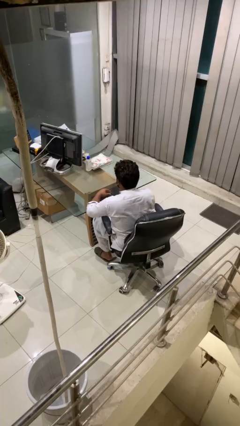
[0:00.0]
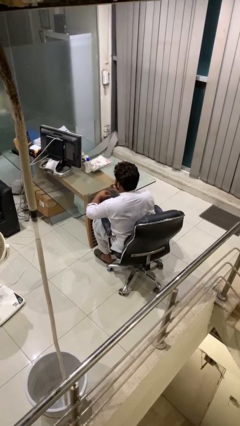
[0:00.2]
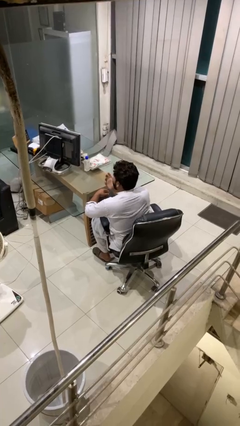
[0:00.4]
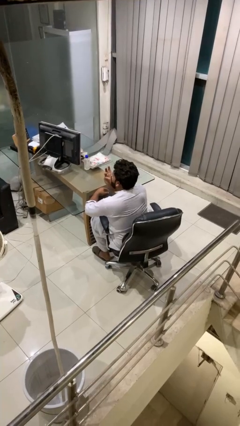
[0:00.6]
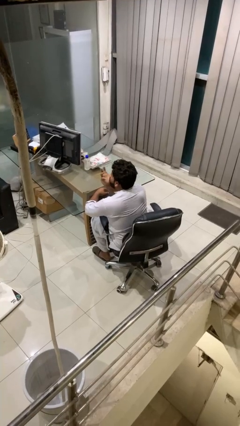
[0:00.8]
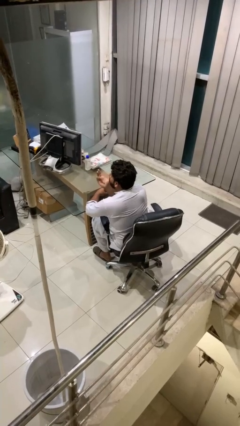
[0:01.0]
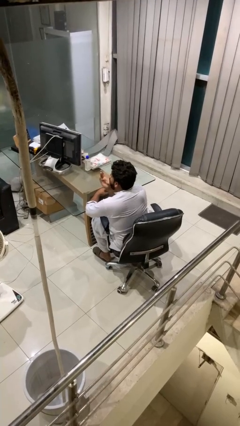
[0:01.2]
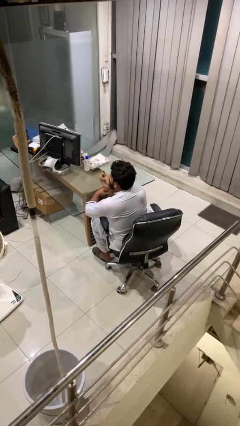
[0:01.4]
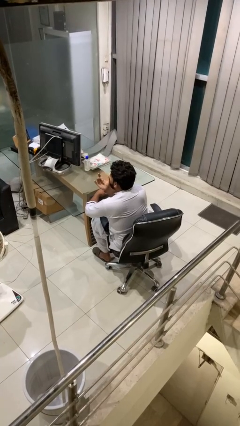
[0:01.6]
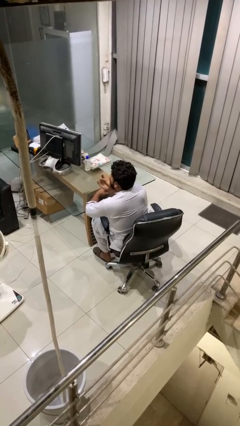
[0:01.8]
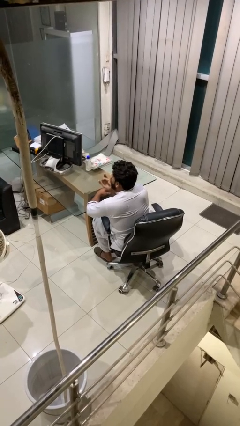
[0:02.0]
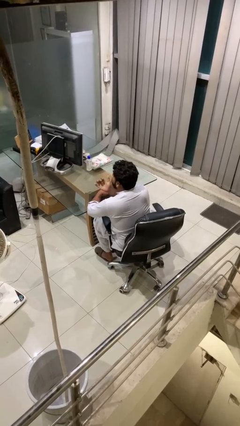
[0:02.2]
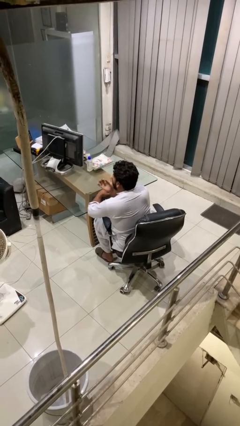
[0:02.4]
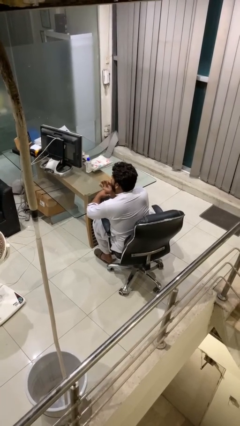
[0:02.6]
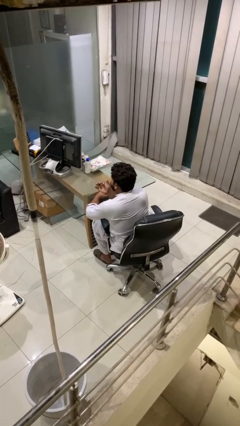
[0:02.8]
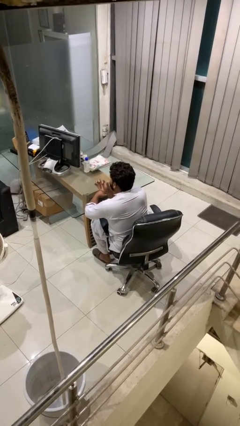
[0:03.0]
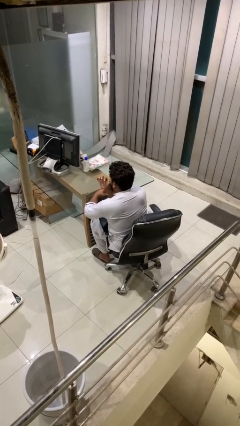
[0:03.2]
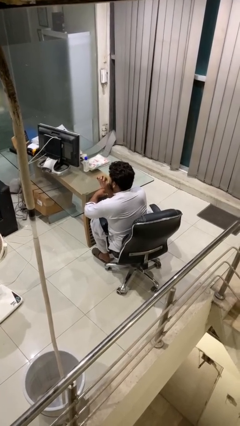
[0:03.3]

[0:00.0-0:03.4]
person licks fingers

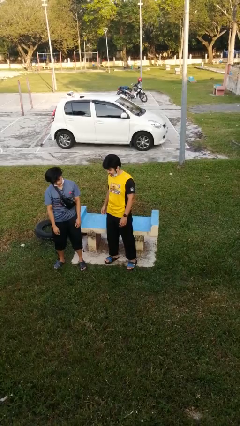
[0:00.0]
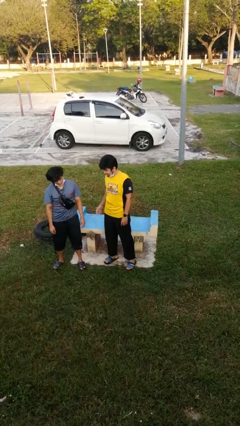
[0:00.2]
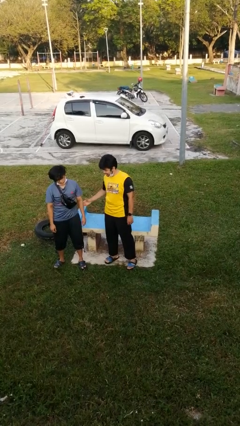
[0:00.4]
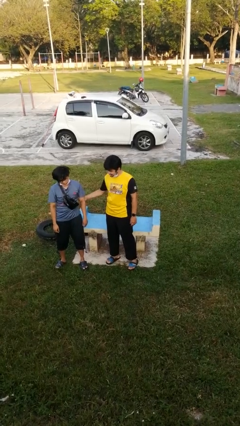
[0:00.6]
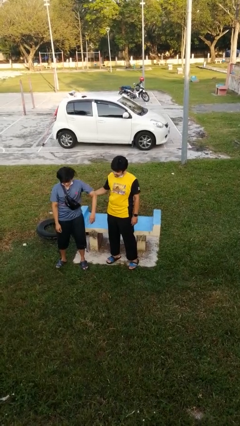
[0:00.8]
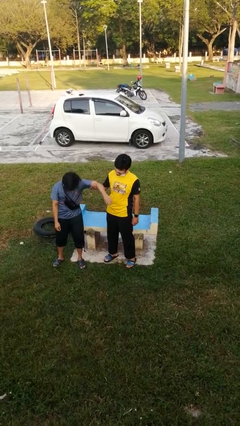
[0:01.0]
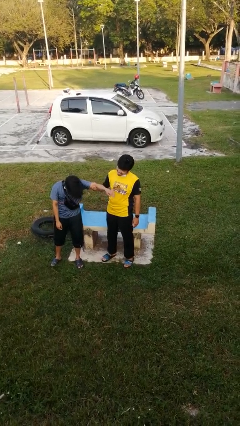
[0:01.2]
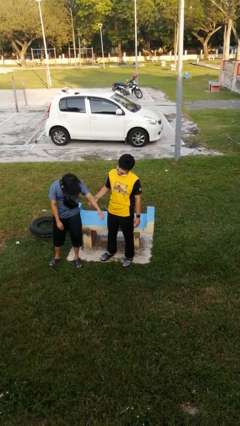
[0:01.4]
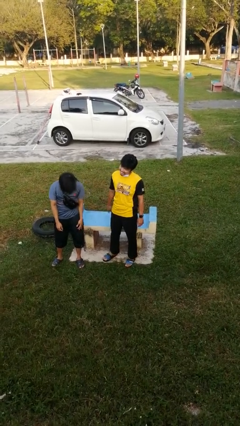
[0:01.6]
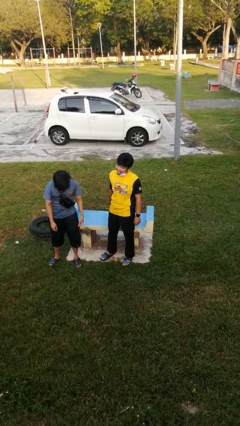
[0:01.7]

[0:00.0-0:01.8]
person grabs person by bicep

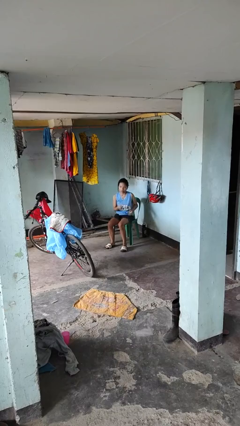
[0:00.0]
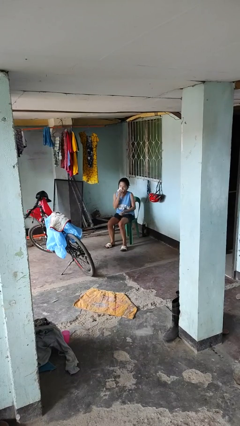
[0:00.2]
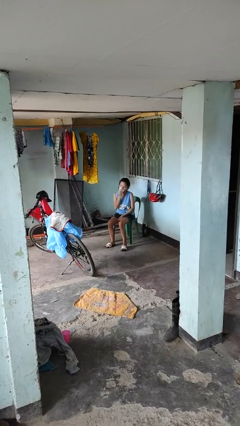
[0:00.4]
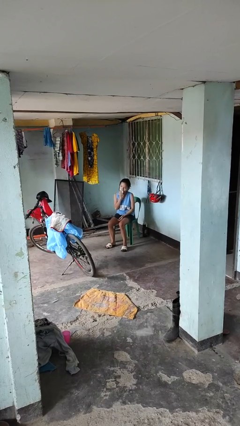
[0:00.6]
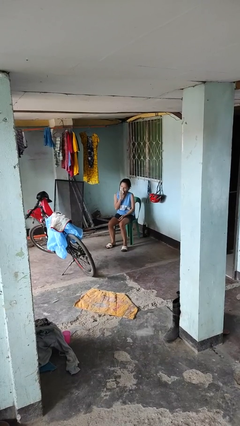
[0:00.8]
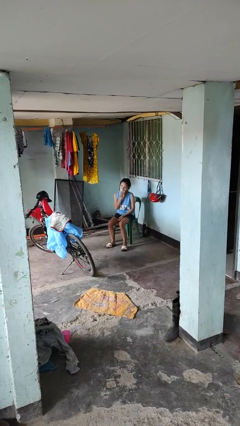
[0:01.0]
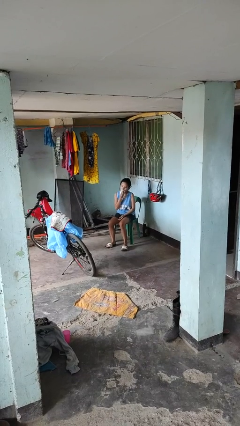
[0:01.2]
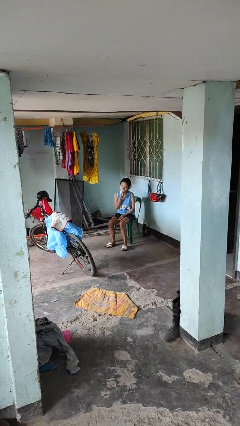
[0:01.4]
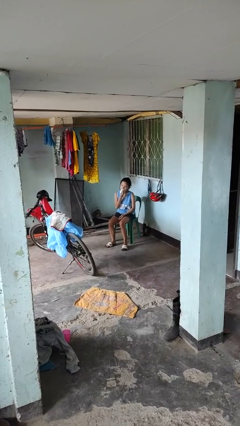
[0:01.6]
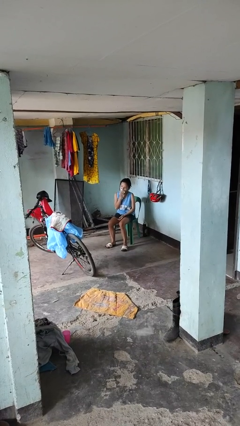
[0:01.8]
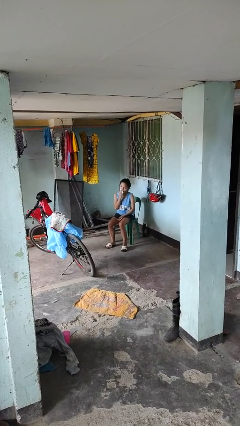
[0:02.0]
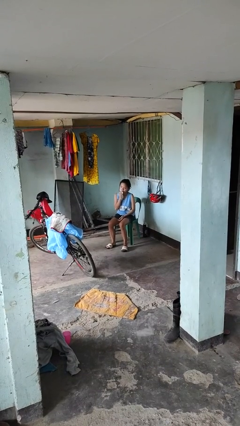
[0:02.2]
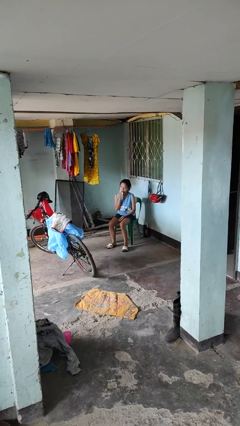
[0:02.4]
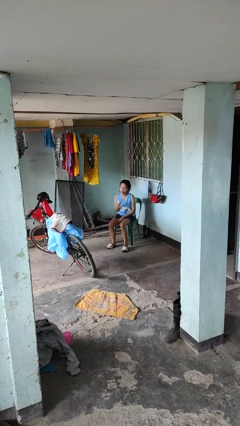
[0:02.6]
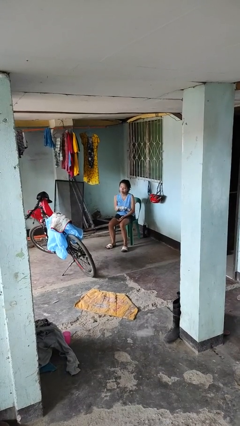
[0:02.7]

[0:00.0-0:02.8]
person wipes mouth with napkin

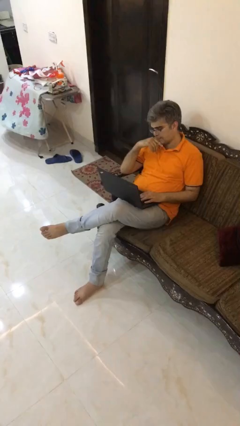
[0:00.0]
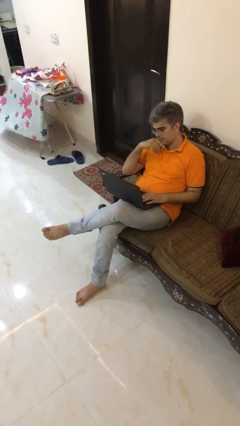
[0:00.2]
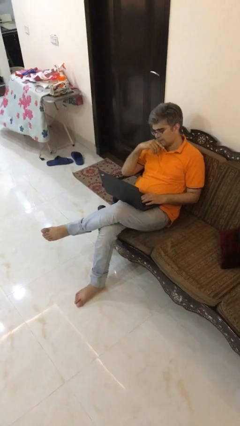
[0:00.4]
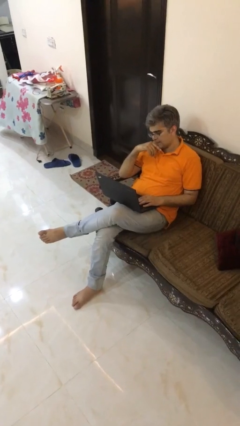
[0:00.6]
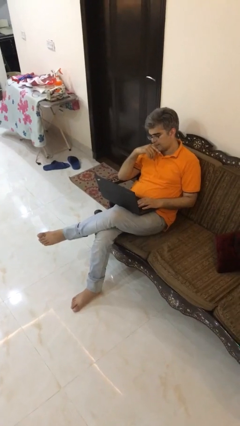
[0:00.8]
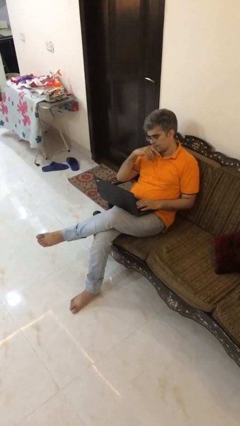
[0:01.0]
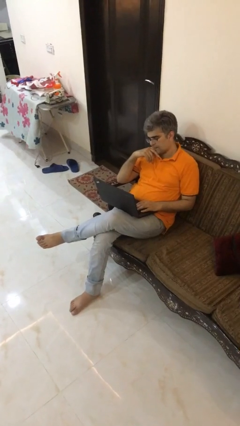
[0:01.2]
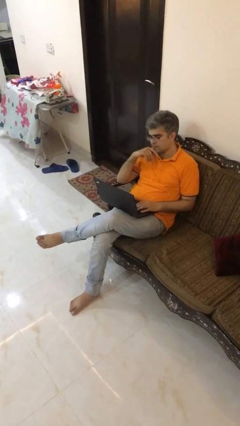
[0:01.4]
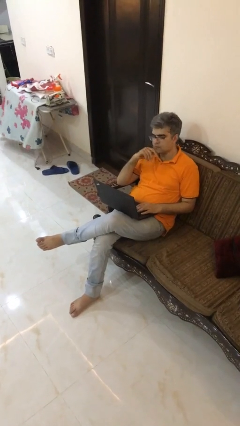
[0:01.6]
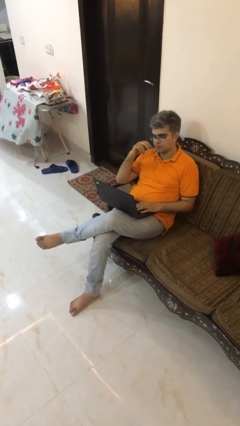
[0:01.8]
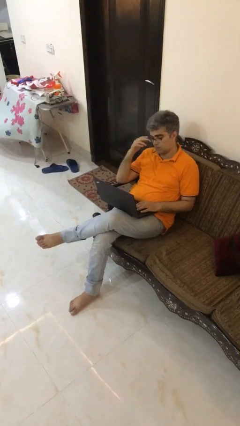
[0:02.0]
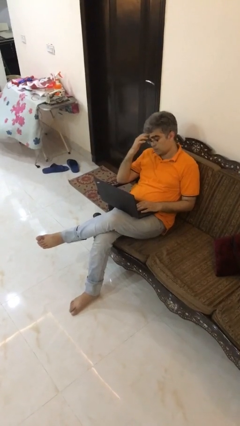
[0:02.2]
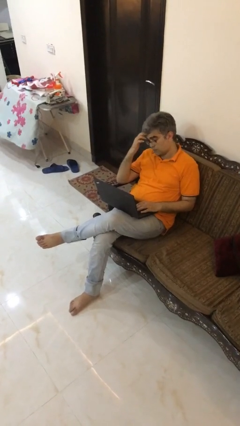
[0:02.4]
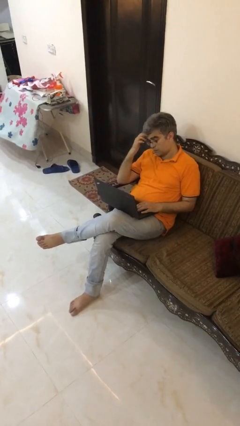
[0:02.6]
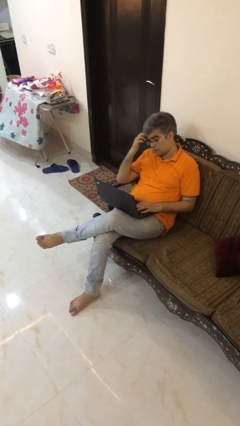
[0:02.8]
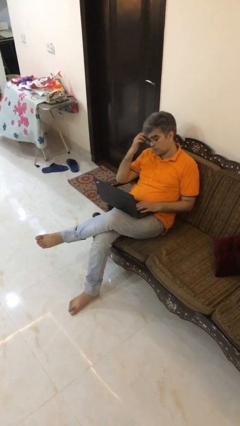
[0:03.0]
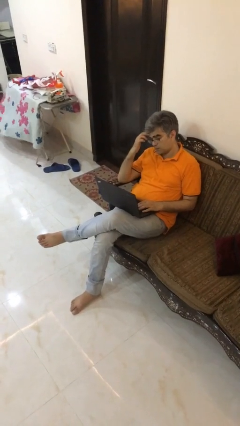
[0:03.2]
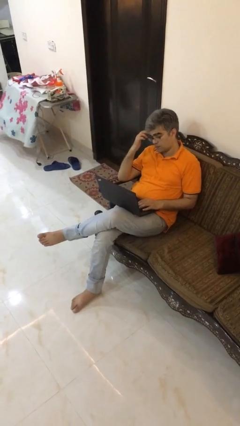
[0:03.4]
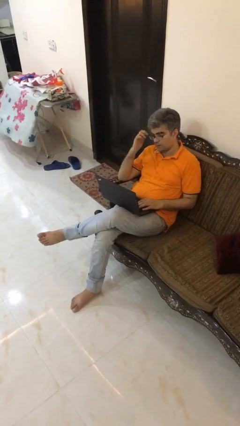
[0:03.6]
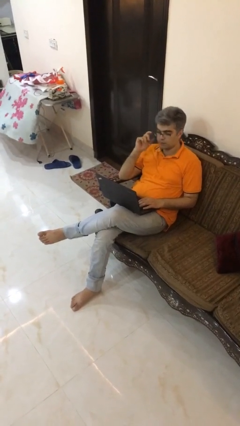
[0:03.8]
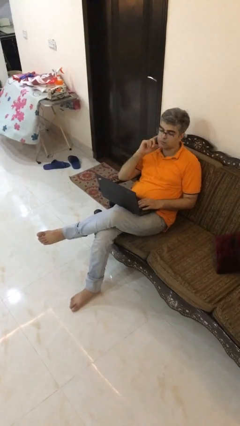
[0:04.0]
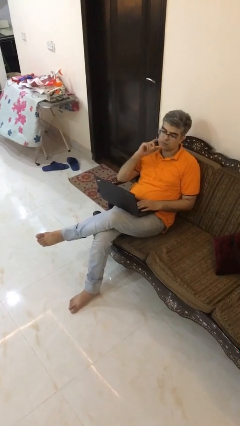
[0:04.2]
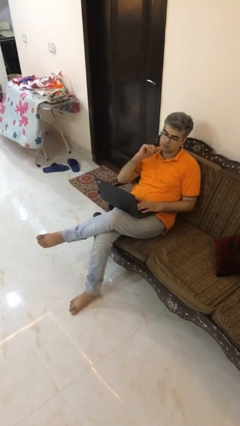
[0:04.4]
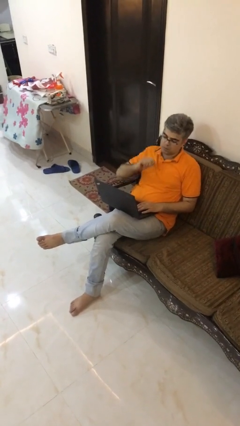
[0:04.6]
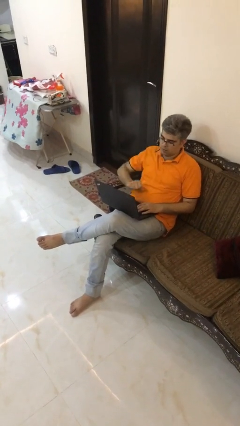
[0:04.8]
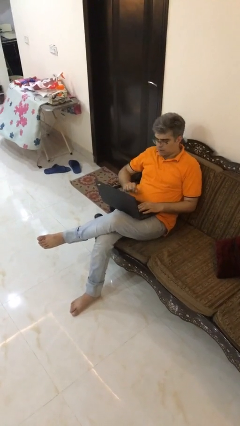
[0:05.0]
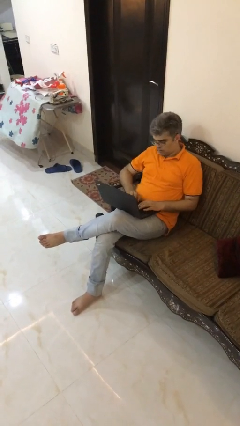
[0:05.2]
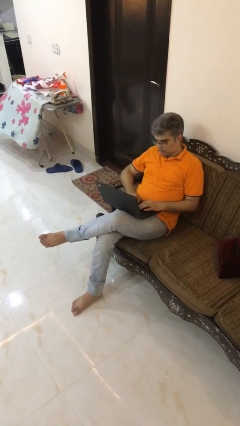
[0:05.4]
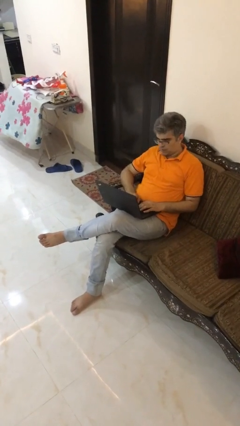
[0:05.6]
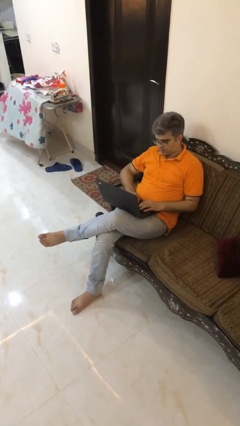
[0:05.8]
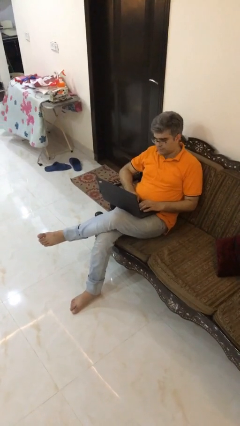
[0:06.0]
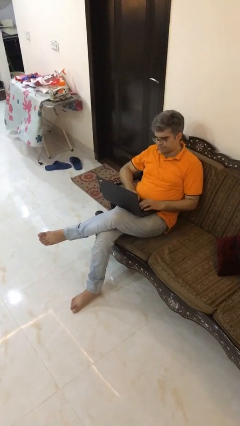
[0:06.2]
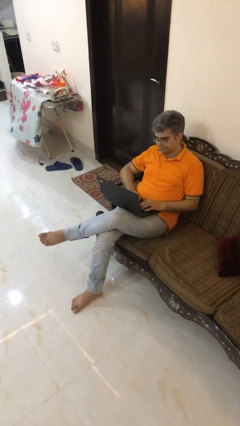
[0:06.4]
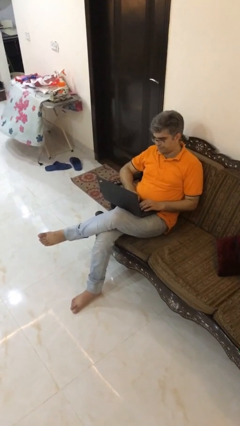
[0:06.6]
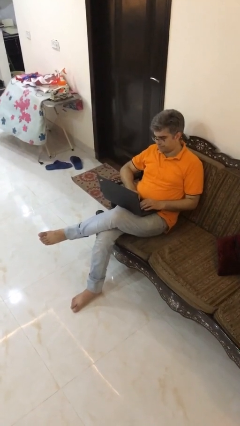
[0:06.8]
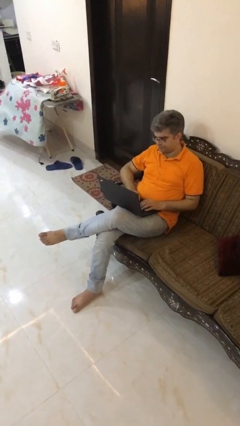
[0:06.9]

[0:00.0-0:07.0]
person interacts with laptop

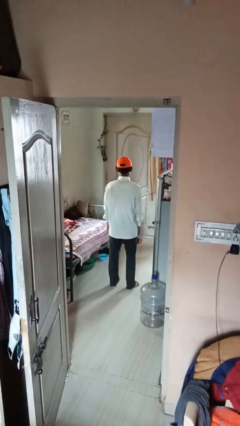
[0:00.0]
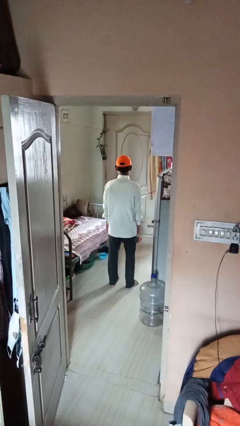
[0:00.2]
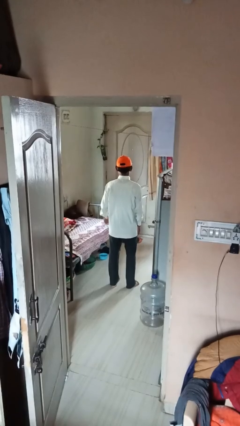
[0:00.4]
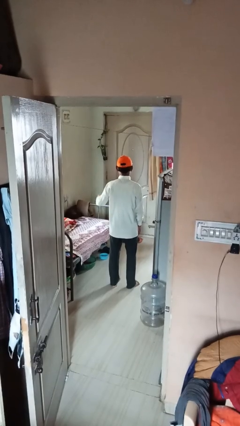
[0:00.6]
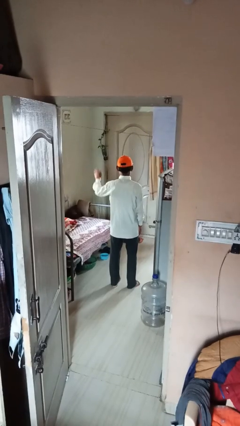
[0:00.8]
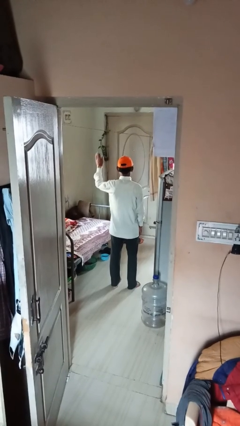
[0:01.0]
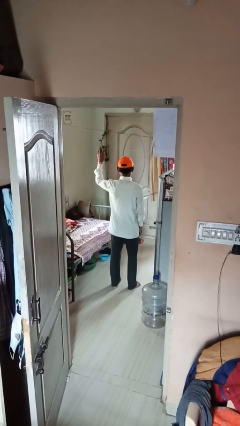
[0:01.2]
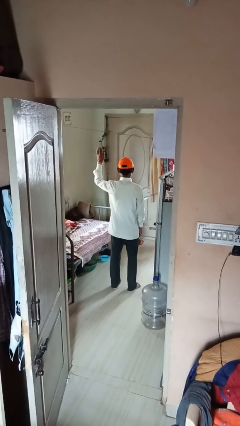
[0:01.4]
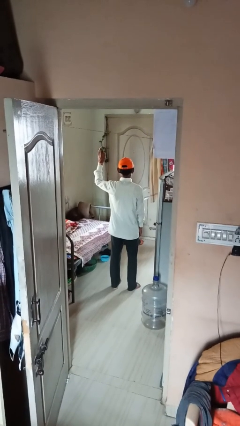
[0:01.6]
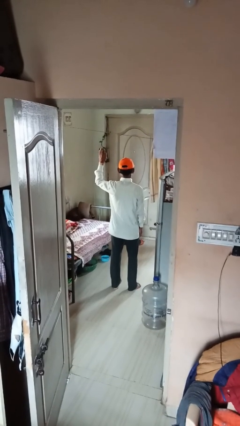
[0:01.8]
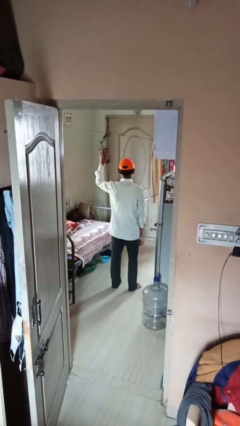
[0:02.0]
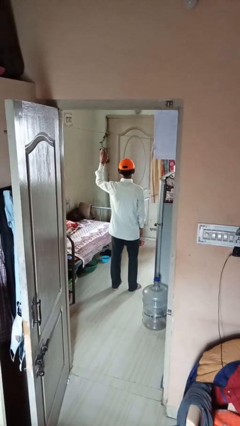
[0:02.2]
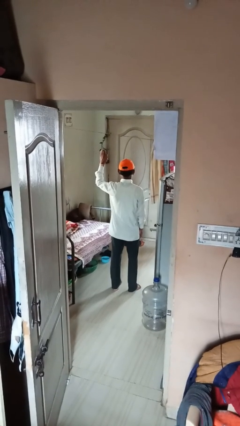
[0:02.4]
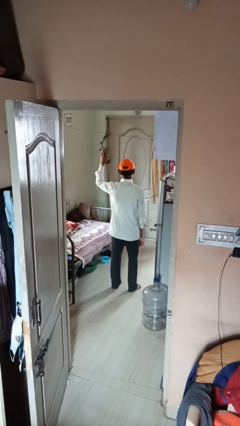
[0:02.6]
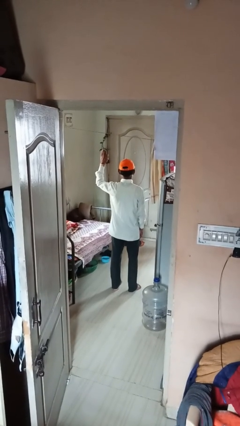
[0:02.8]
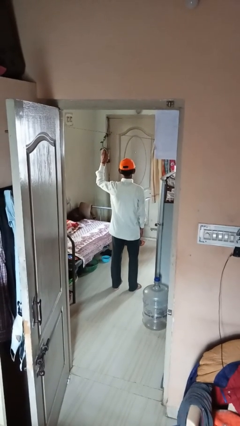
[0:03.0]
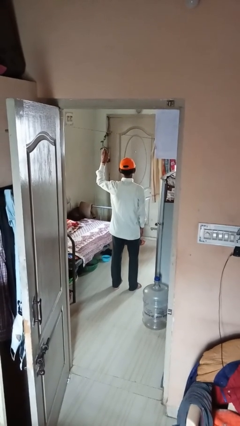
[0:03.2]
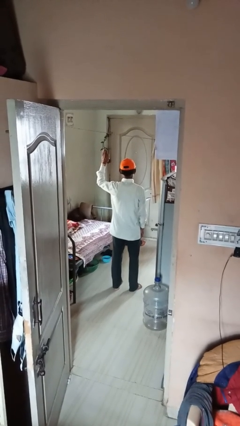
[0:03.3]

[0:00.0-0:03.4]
person gestures raise hand
